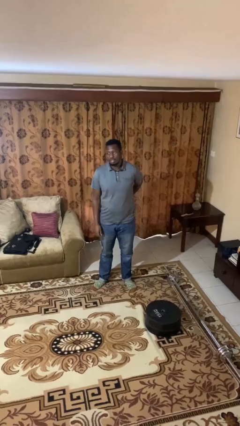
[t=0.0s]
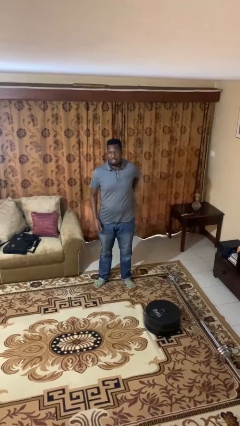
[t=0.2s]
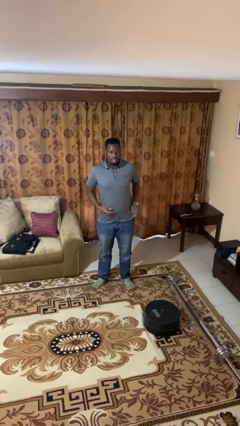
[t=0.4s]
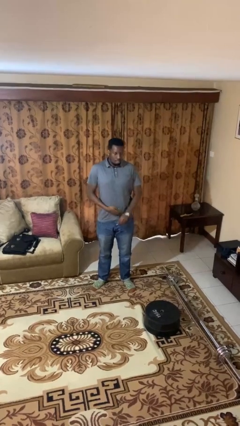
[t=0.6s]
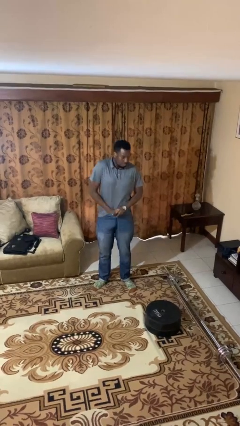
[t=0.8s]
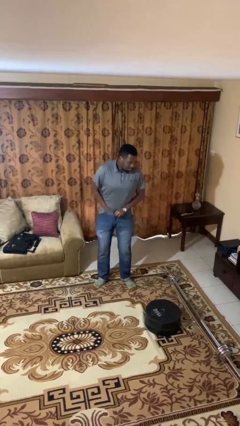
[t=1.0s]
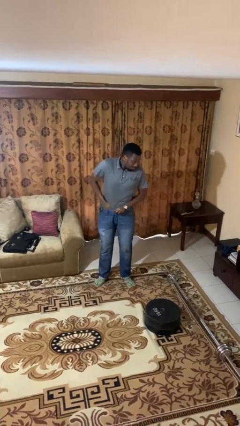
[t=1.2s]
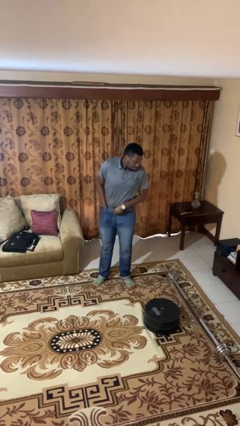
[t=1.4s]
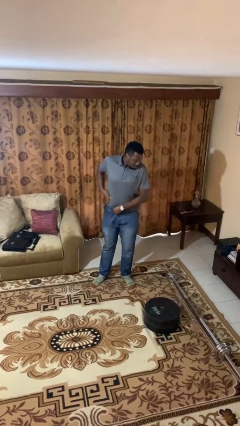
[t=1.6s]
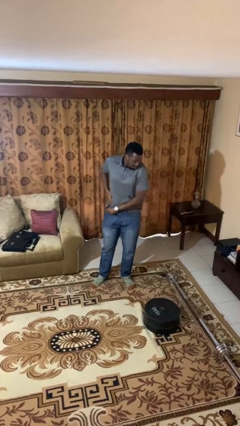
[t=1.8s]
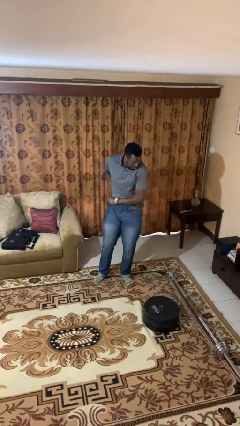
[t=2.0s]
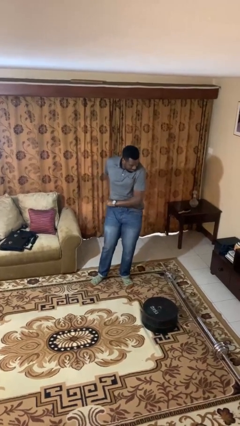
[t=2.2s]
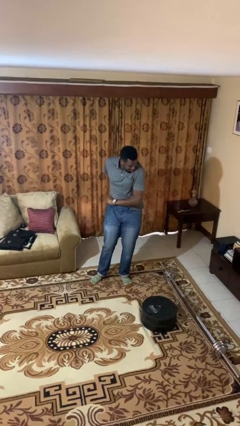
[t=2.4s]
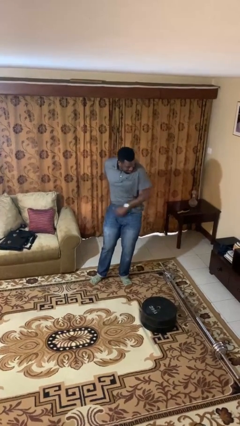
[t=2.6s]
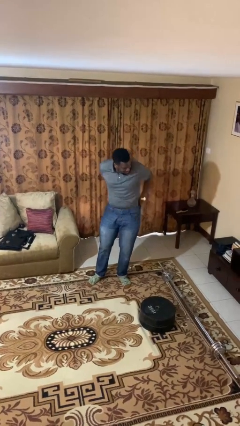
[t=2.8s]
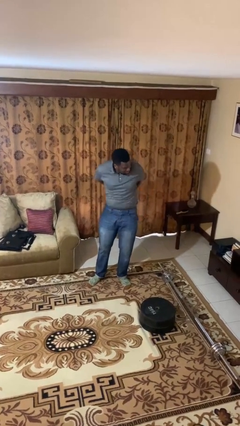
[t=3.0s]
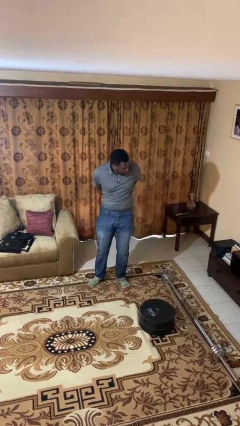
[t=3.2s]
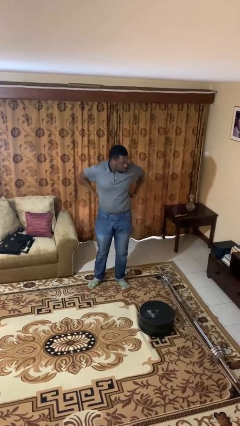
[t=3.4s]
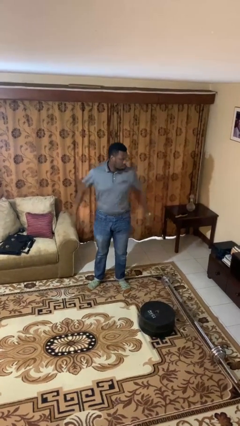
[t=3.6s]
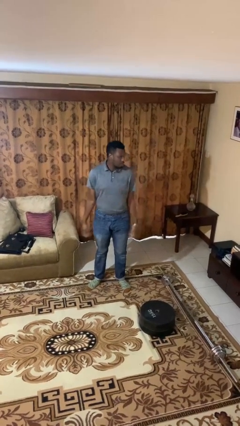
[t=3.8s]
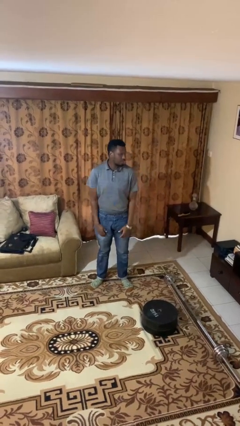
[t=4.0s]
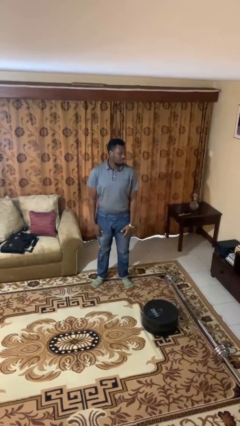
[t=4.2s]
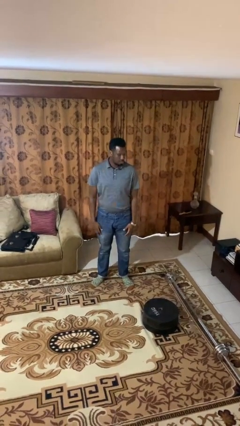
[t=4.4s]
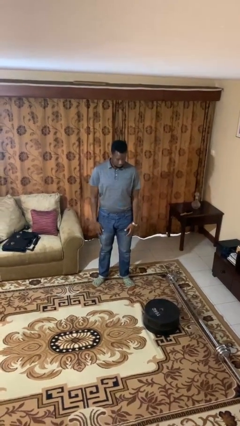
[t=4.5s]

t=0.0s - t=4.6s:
person tucks in shirt

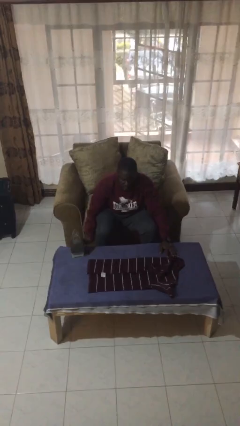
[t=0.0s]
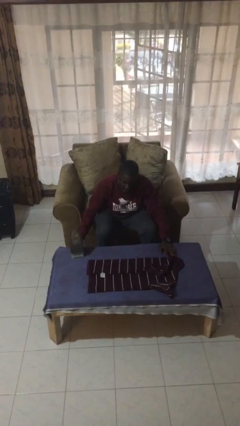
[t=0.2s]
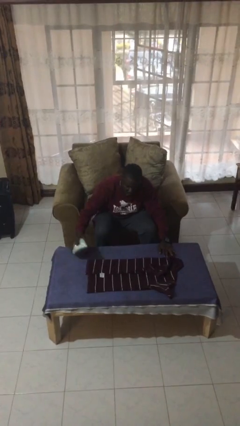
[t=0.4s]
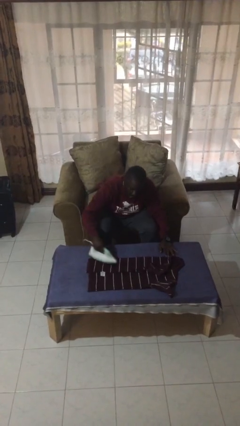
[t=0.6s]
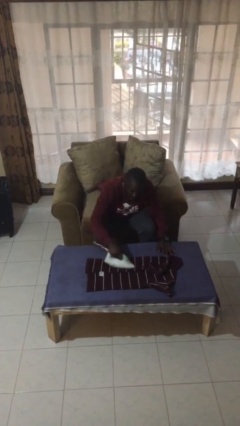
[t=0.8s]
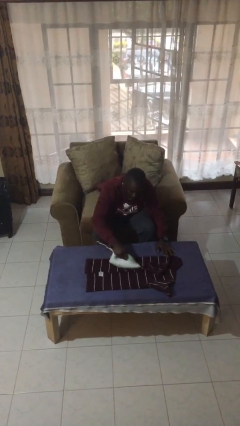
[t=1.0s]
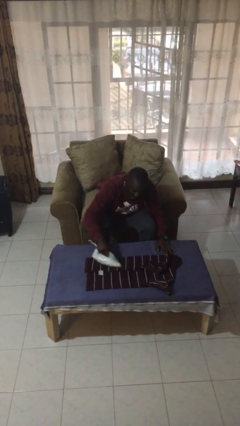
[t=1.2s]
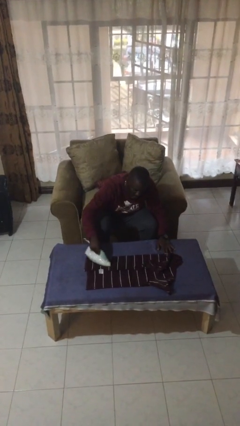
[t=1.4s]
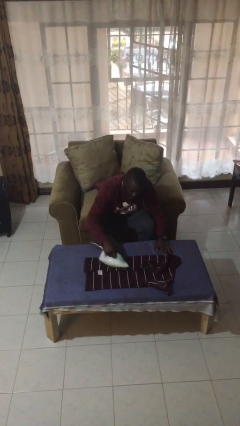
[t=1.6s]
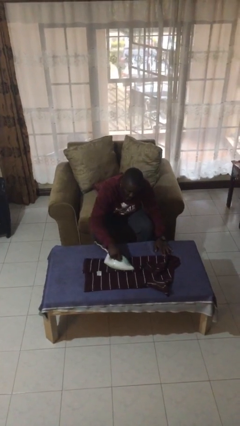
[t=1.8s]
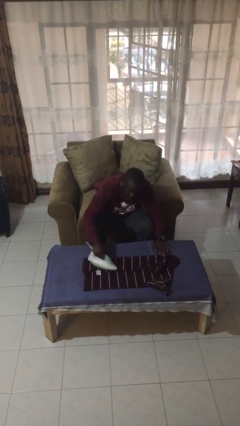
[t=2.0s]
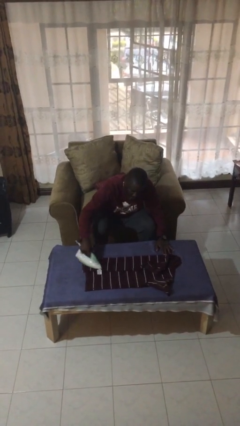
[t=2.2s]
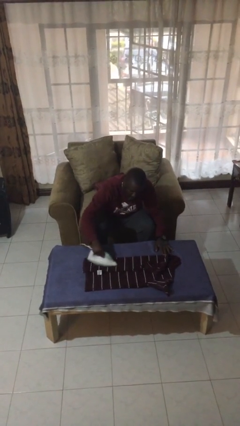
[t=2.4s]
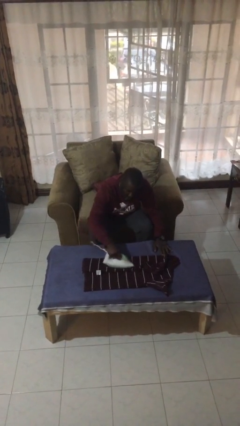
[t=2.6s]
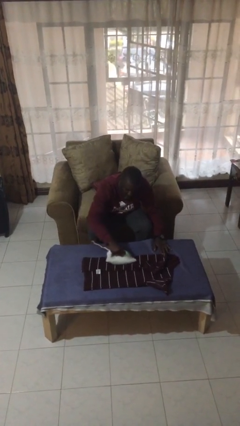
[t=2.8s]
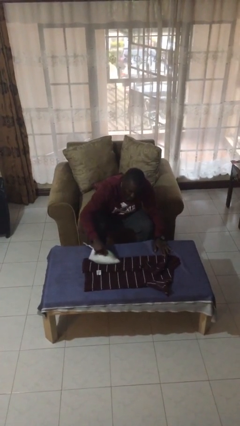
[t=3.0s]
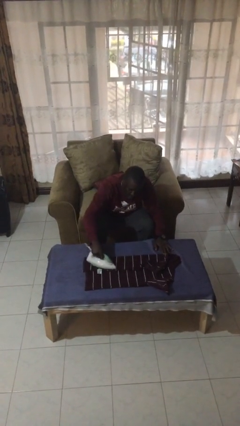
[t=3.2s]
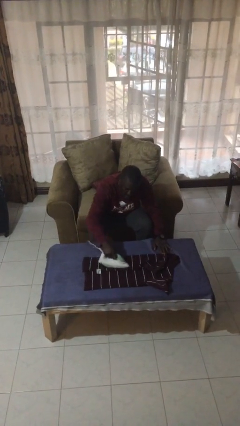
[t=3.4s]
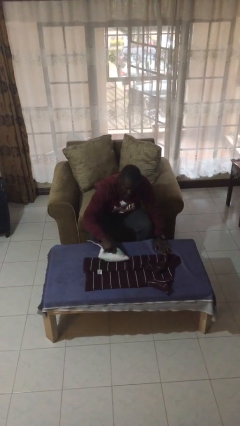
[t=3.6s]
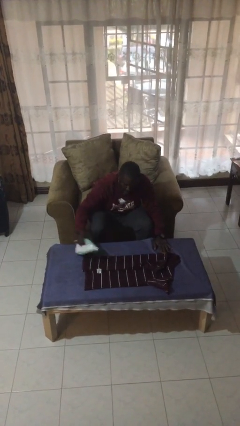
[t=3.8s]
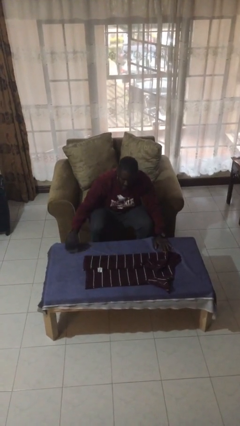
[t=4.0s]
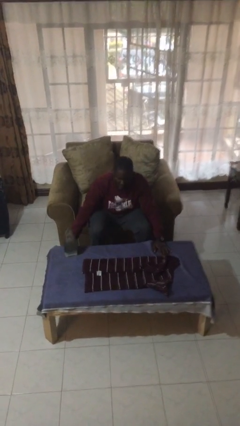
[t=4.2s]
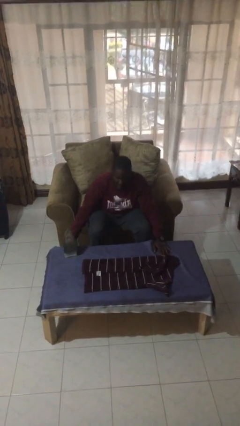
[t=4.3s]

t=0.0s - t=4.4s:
person irons clothes

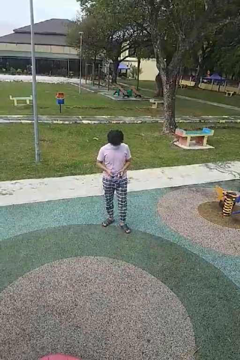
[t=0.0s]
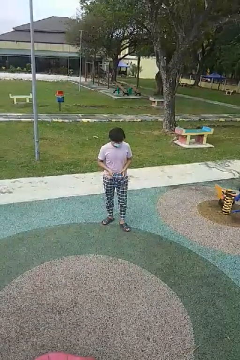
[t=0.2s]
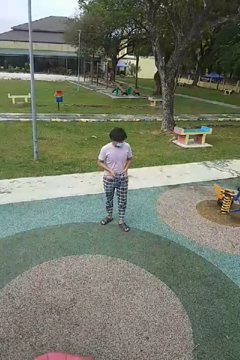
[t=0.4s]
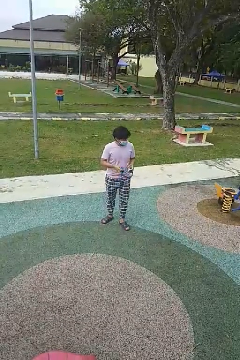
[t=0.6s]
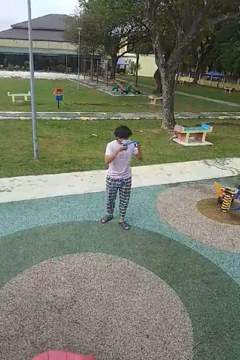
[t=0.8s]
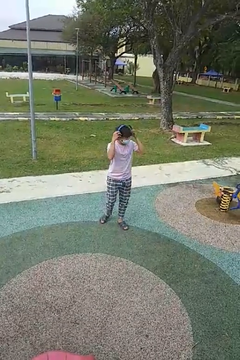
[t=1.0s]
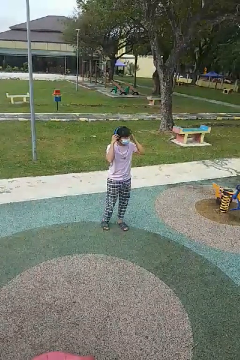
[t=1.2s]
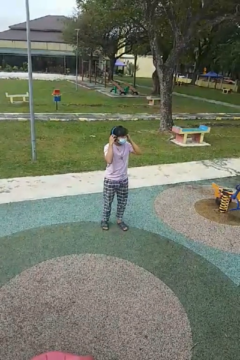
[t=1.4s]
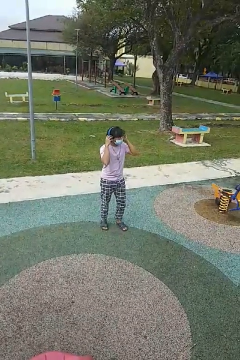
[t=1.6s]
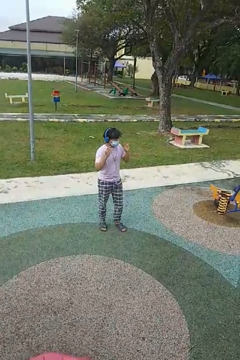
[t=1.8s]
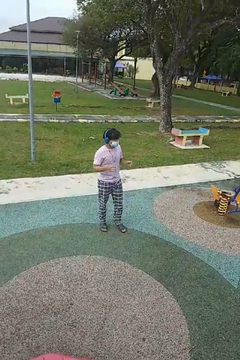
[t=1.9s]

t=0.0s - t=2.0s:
person puts on headphones

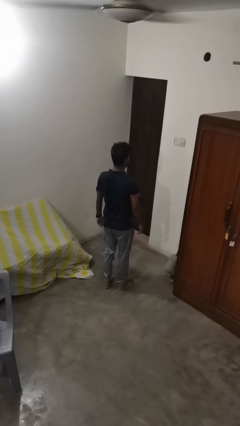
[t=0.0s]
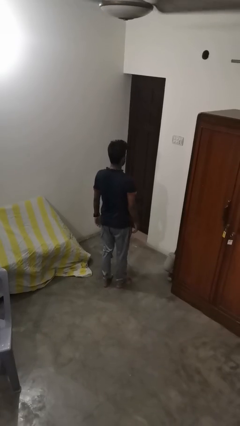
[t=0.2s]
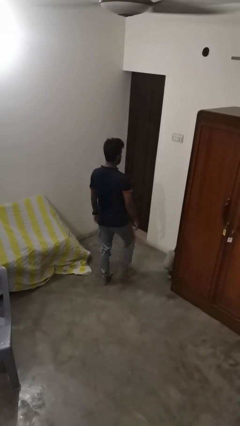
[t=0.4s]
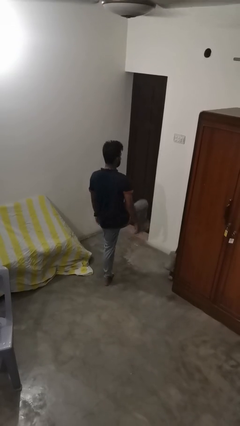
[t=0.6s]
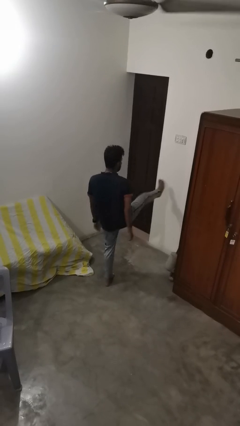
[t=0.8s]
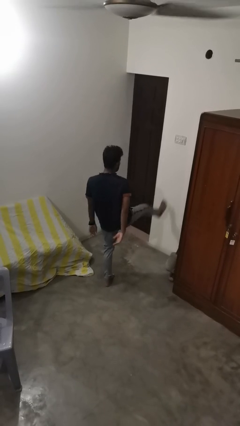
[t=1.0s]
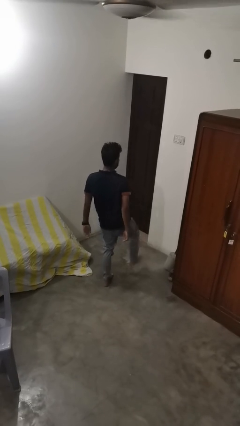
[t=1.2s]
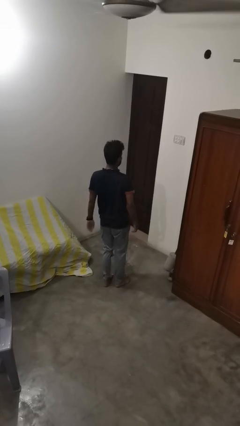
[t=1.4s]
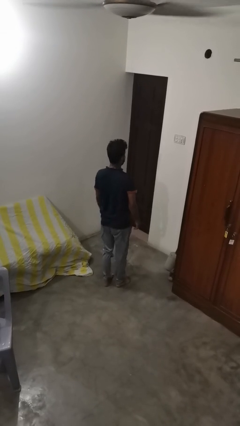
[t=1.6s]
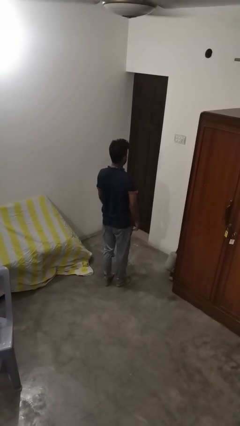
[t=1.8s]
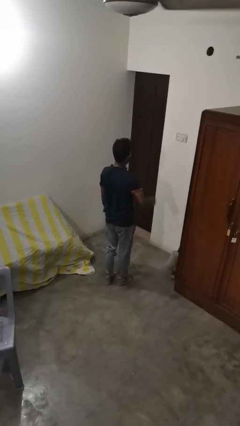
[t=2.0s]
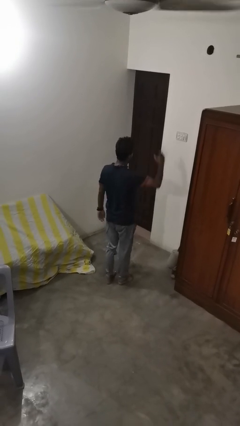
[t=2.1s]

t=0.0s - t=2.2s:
person karate kicks

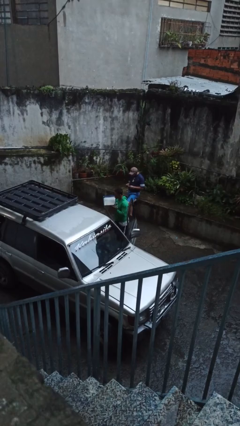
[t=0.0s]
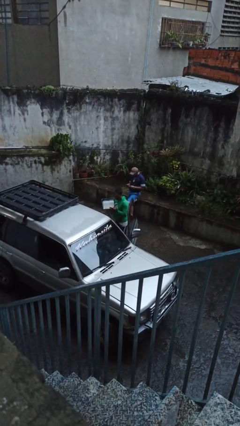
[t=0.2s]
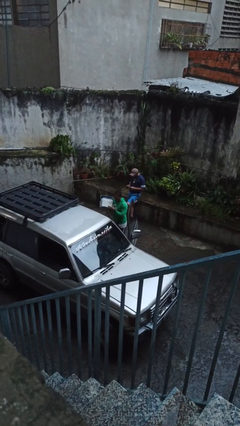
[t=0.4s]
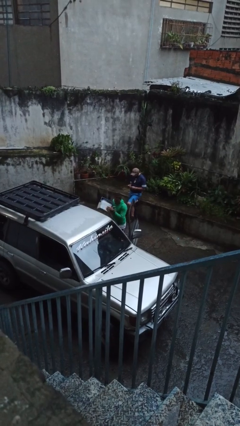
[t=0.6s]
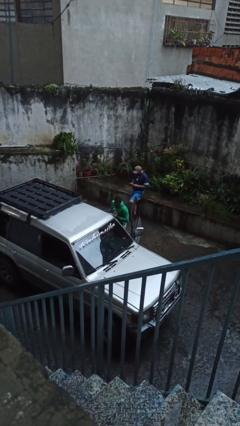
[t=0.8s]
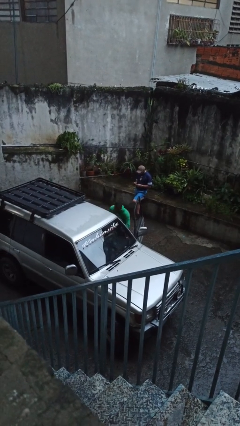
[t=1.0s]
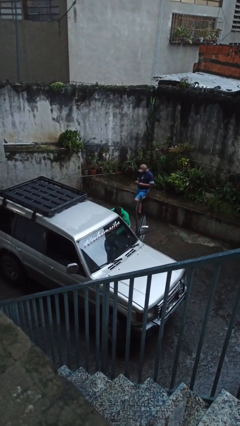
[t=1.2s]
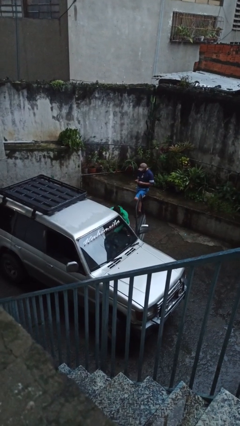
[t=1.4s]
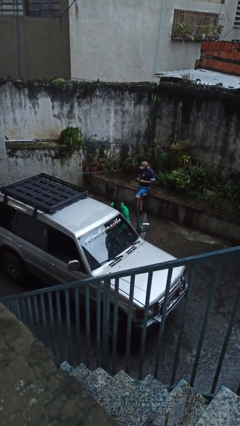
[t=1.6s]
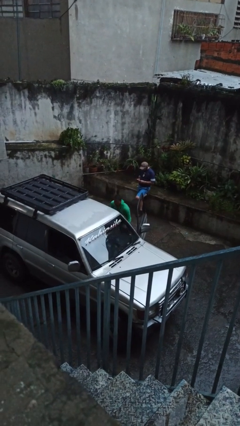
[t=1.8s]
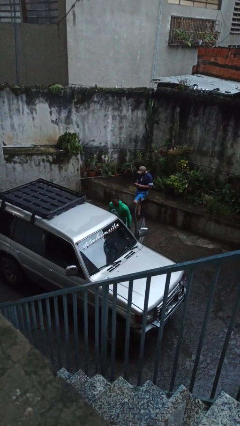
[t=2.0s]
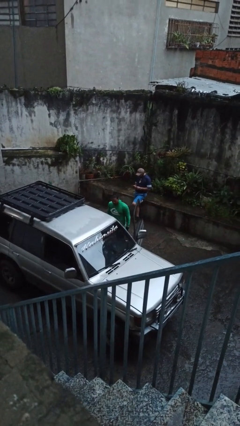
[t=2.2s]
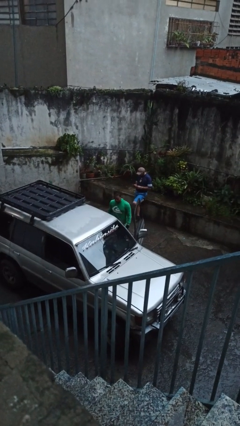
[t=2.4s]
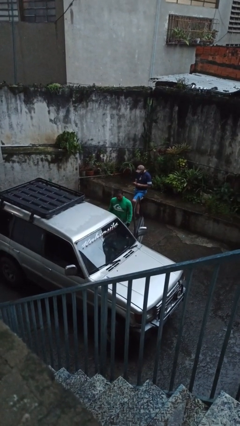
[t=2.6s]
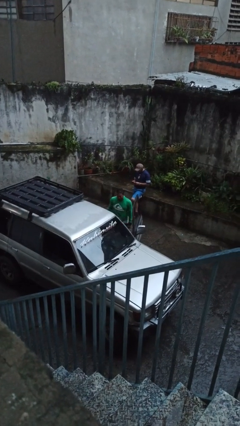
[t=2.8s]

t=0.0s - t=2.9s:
person loads car

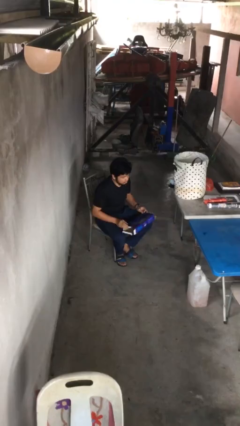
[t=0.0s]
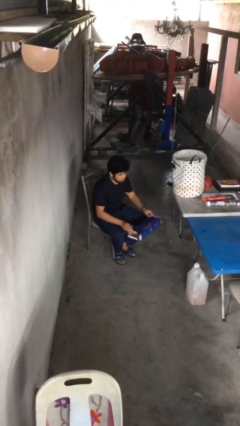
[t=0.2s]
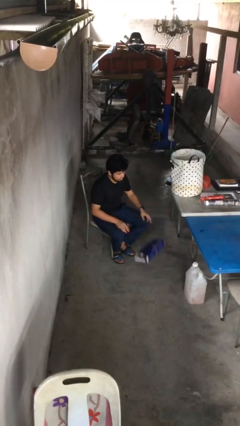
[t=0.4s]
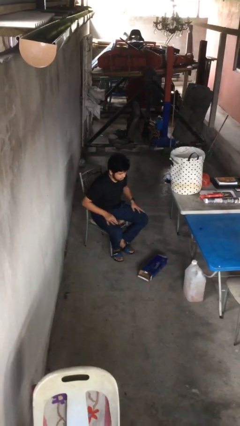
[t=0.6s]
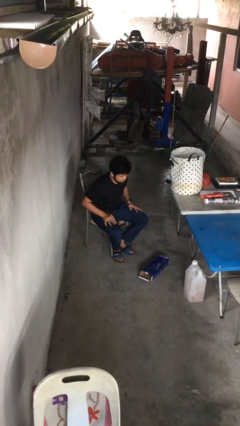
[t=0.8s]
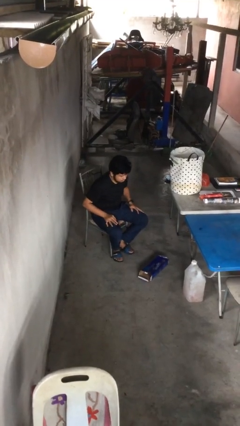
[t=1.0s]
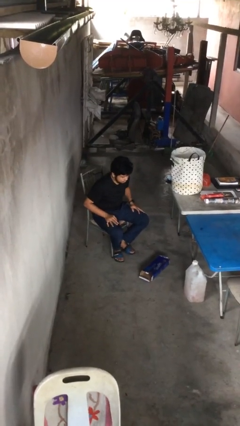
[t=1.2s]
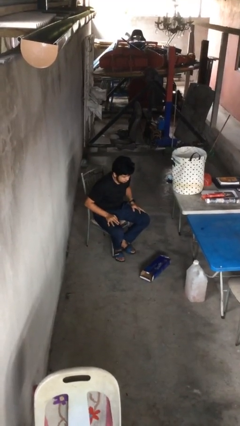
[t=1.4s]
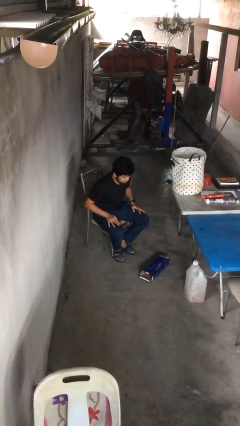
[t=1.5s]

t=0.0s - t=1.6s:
person drops object

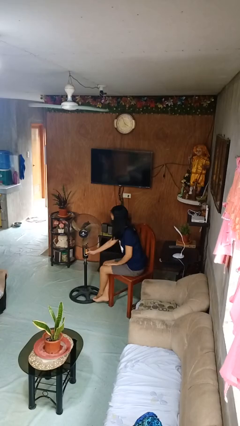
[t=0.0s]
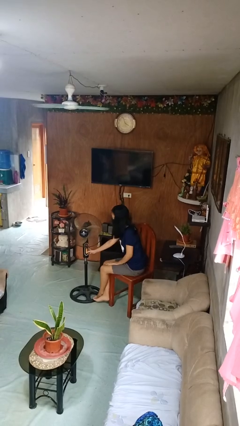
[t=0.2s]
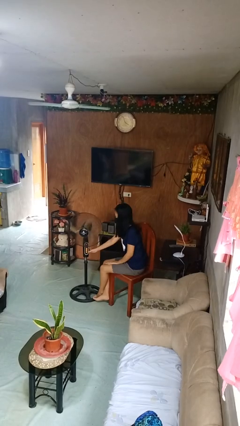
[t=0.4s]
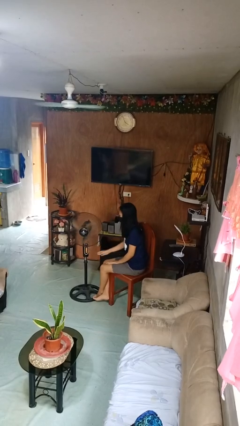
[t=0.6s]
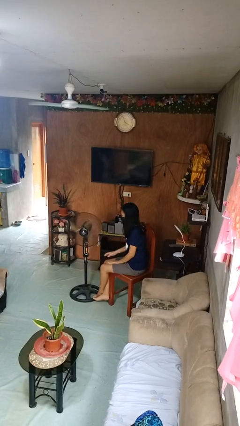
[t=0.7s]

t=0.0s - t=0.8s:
person turns on fan
